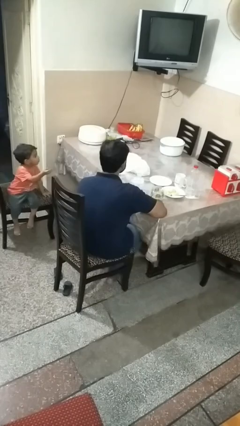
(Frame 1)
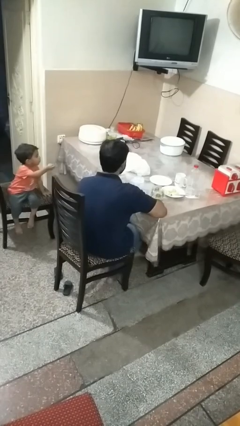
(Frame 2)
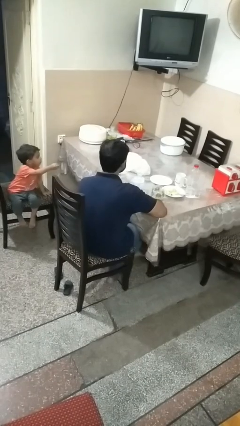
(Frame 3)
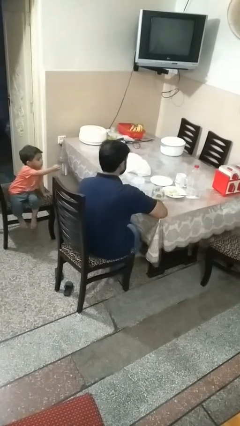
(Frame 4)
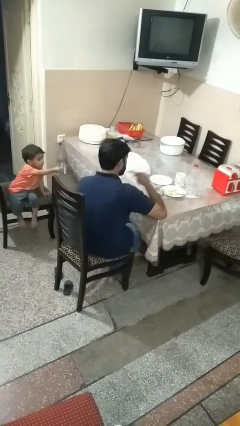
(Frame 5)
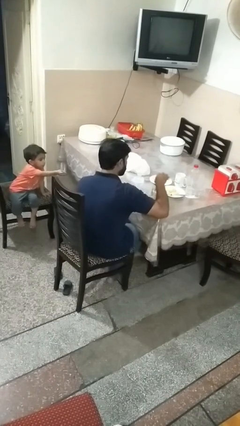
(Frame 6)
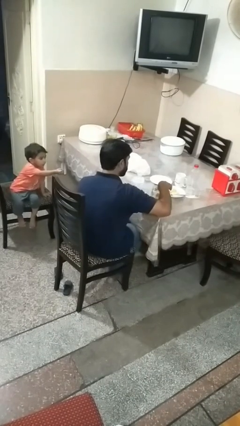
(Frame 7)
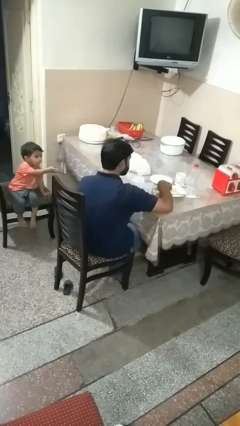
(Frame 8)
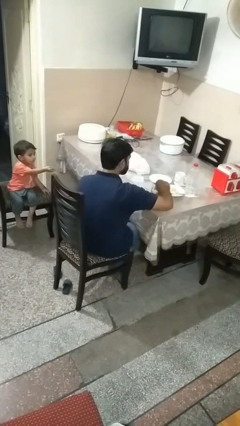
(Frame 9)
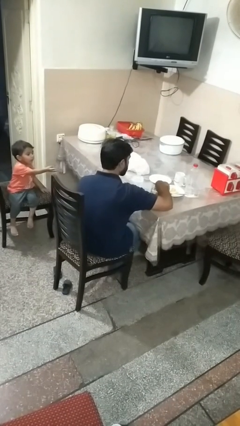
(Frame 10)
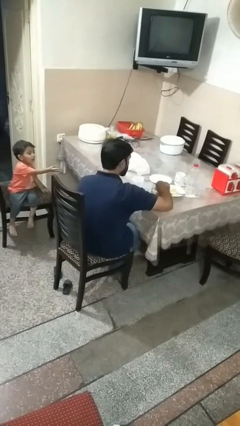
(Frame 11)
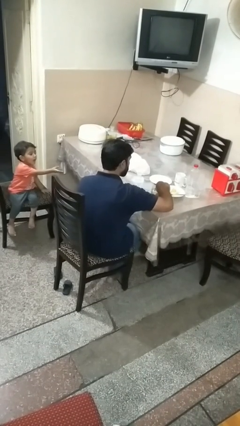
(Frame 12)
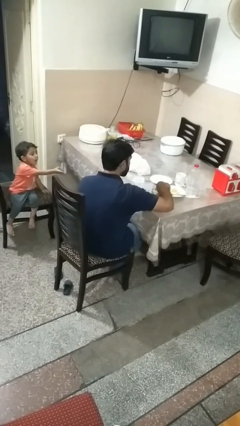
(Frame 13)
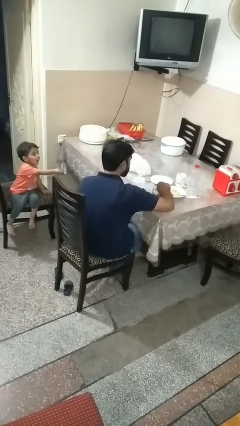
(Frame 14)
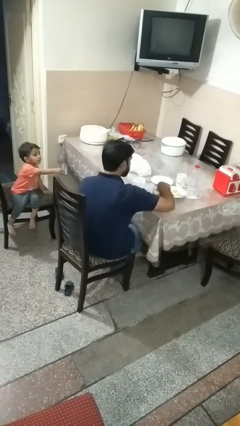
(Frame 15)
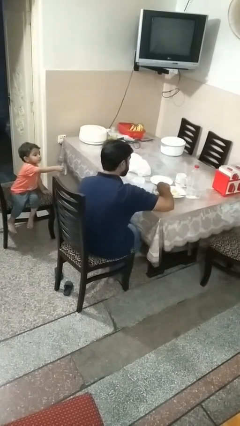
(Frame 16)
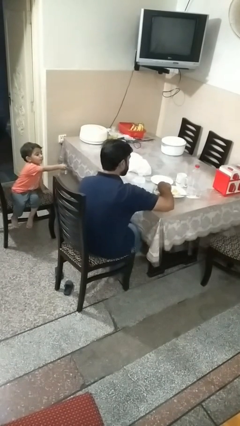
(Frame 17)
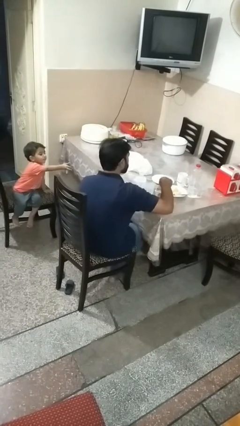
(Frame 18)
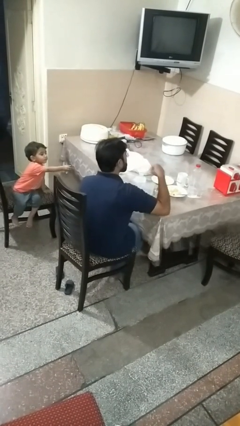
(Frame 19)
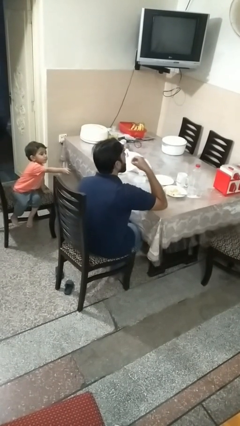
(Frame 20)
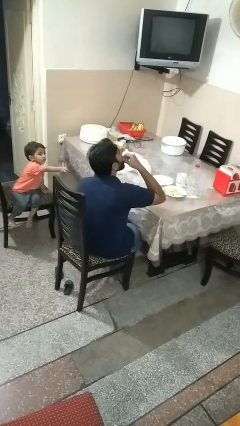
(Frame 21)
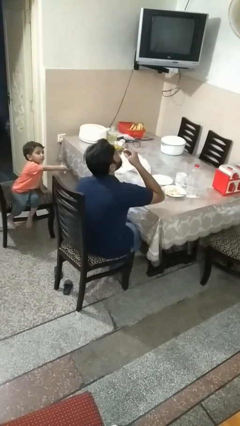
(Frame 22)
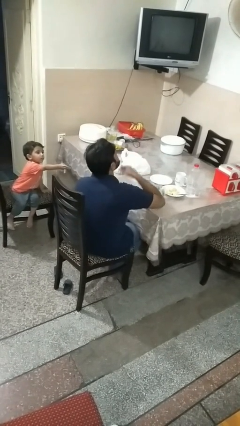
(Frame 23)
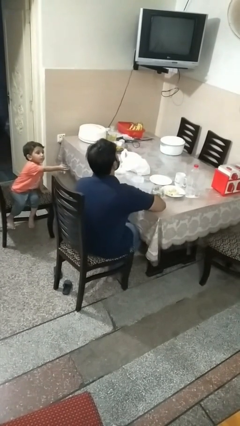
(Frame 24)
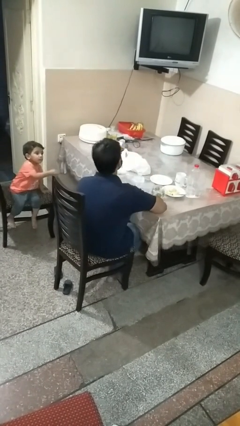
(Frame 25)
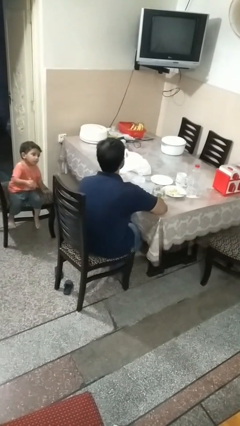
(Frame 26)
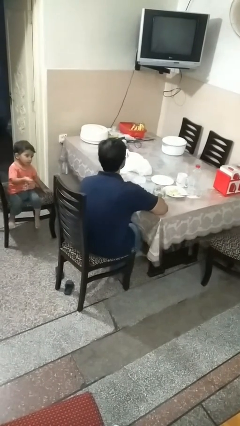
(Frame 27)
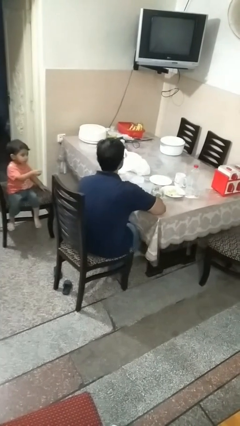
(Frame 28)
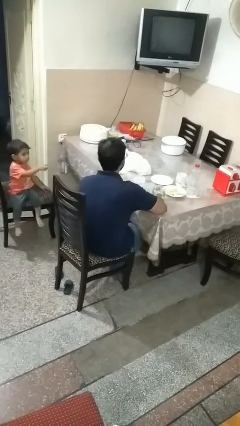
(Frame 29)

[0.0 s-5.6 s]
person eats with hands

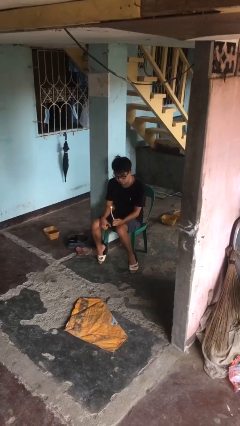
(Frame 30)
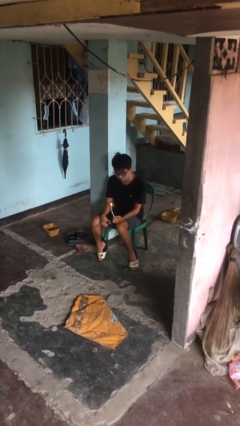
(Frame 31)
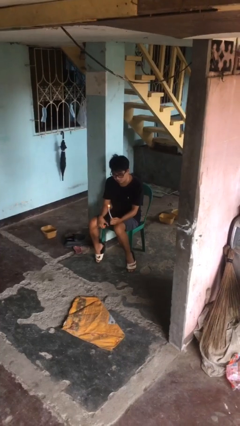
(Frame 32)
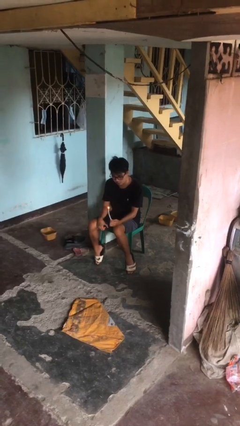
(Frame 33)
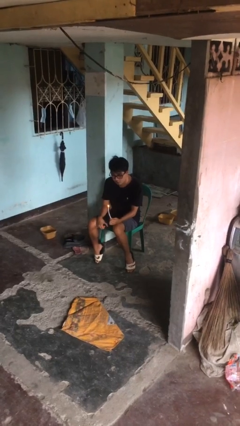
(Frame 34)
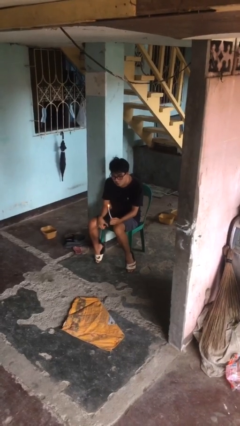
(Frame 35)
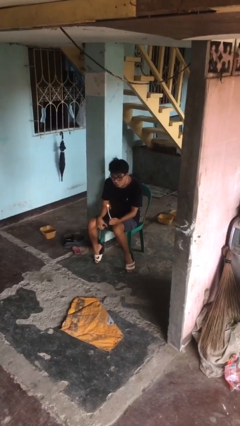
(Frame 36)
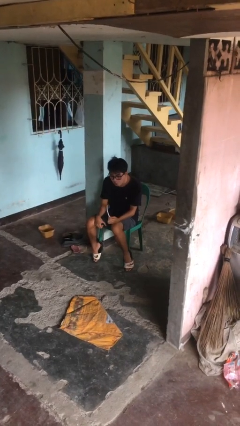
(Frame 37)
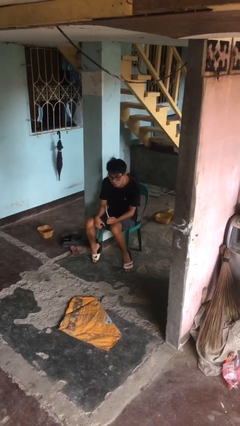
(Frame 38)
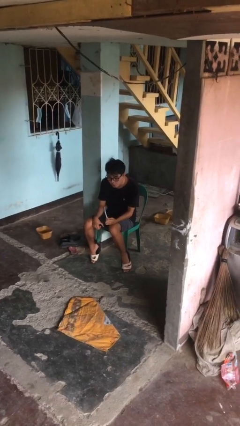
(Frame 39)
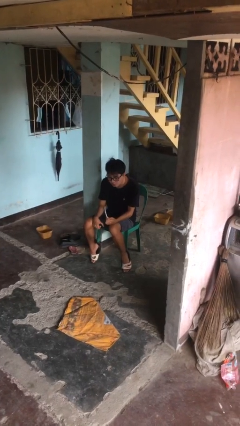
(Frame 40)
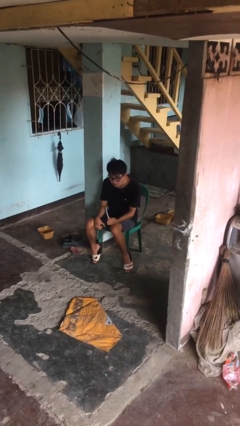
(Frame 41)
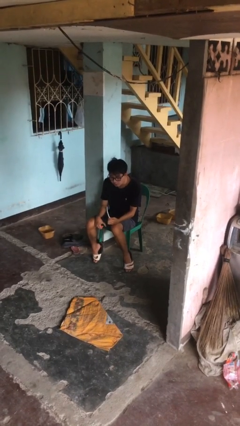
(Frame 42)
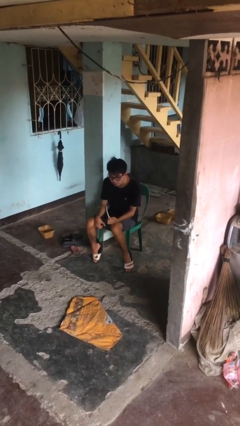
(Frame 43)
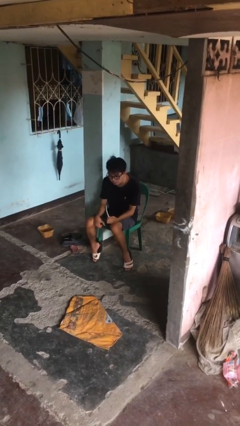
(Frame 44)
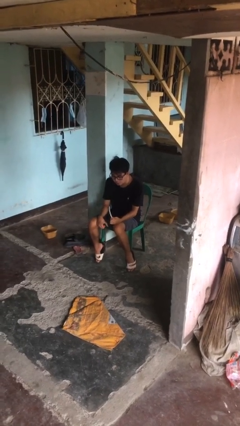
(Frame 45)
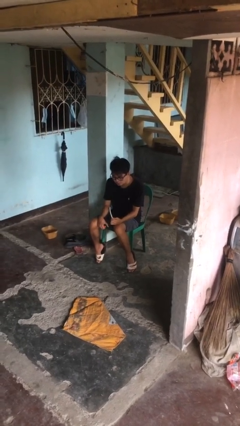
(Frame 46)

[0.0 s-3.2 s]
person extinguishes candle

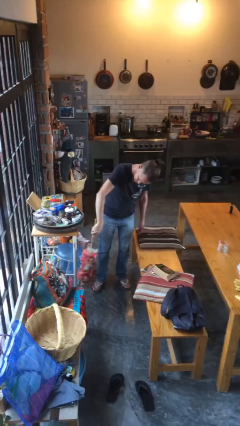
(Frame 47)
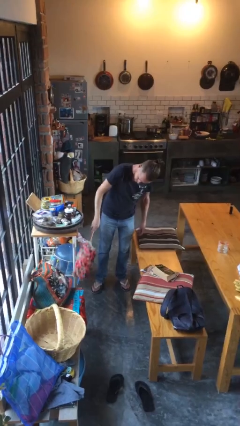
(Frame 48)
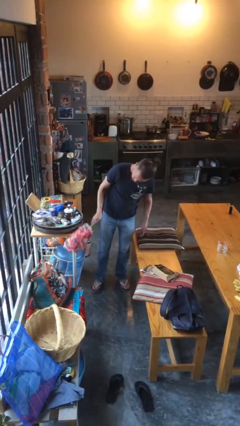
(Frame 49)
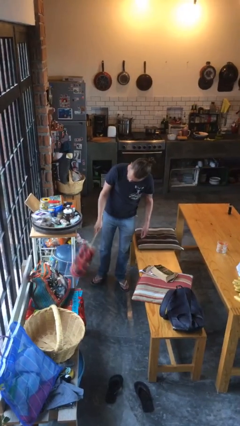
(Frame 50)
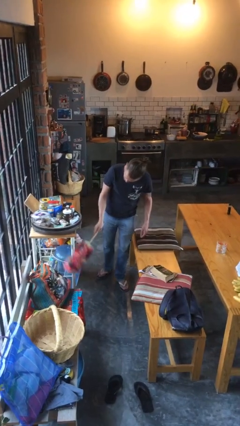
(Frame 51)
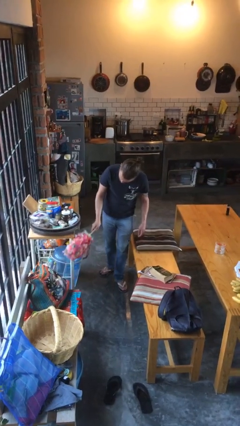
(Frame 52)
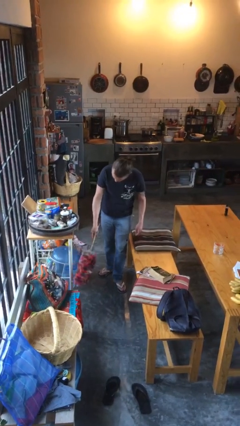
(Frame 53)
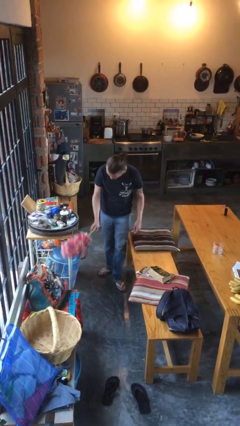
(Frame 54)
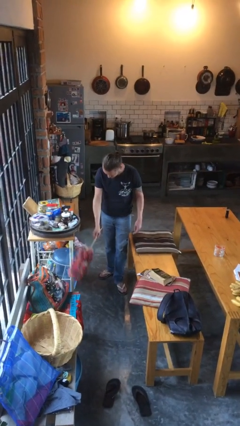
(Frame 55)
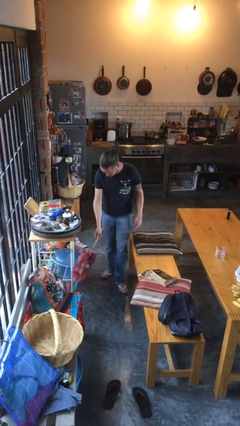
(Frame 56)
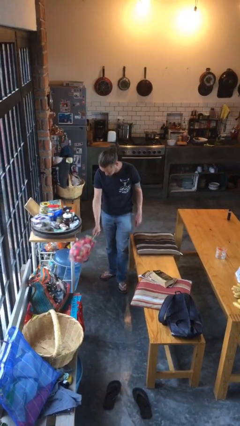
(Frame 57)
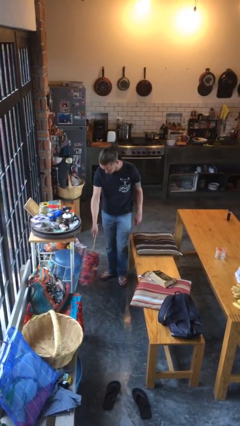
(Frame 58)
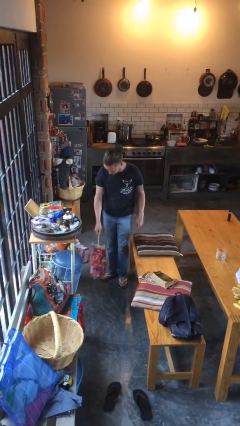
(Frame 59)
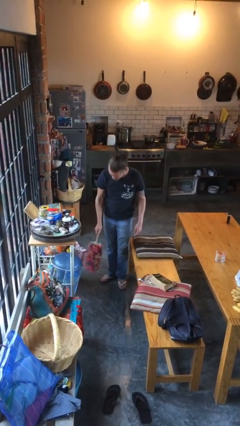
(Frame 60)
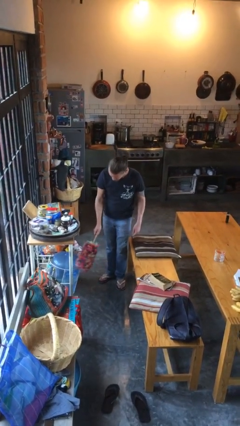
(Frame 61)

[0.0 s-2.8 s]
person dusts furniture

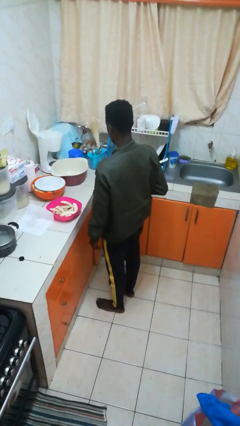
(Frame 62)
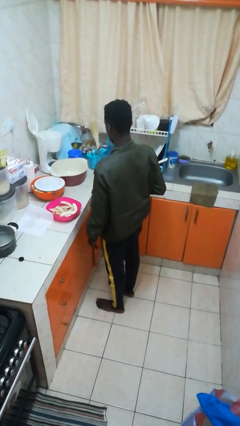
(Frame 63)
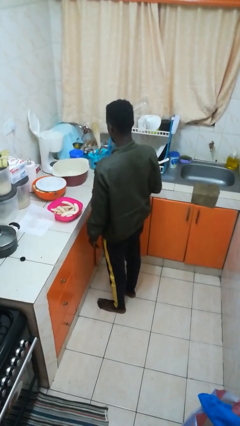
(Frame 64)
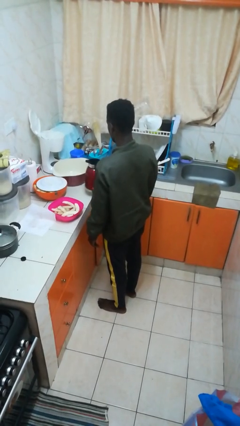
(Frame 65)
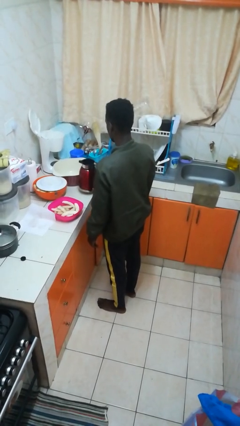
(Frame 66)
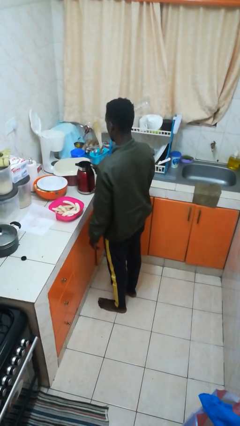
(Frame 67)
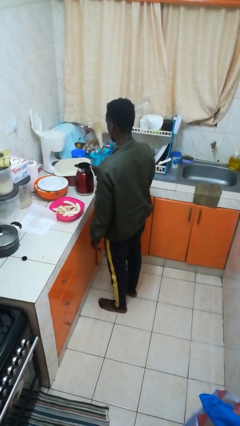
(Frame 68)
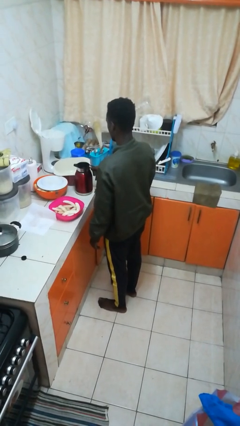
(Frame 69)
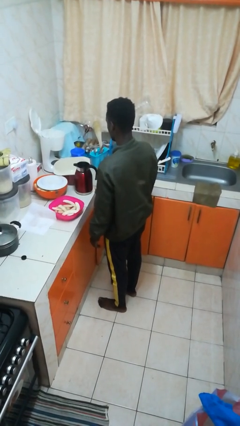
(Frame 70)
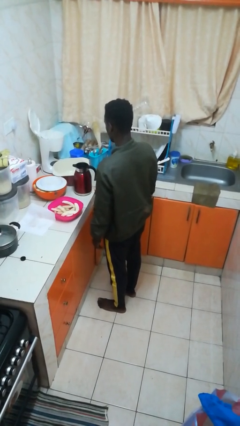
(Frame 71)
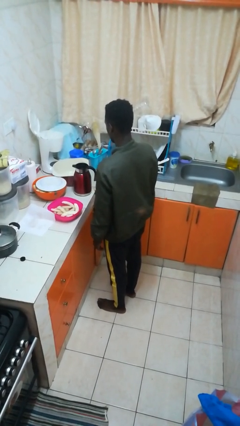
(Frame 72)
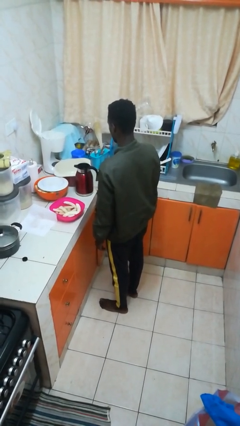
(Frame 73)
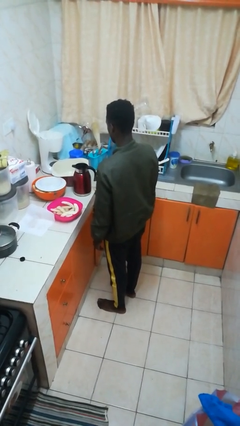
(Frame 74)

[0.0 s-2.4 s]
person puts down object on countertop

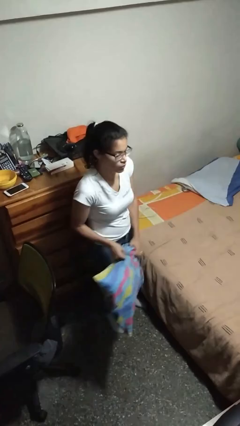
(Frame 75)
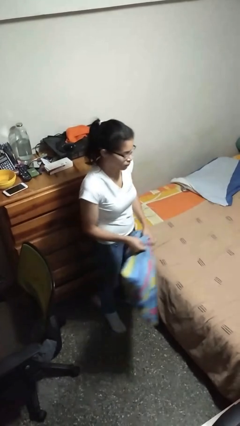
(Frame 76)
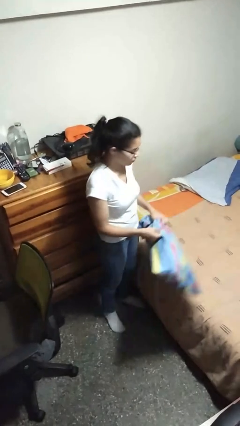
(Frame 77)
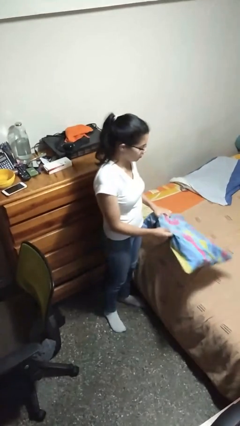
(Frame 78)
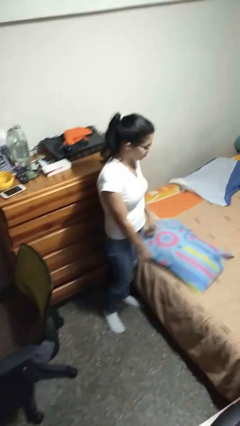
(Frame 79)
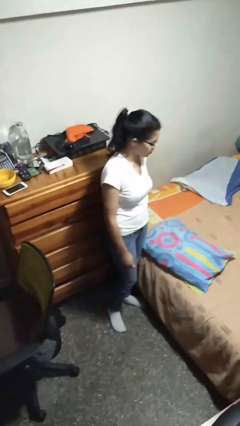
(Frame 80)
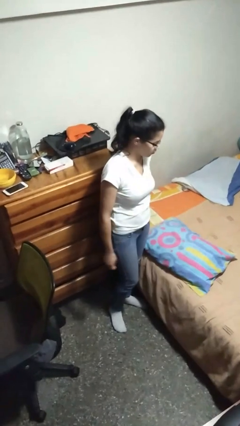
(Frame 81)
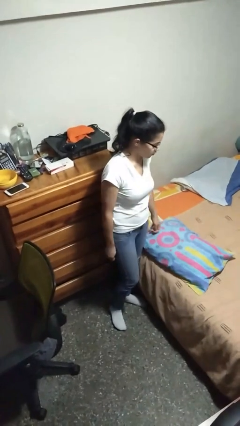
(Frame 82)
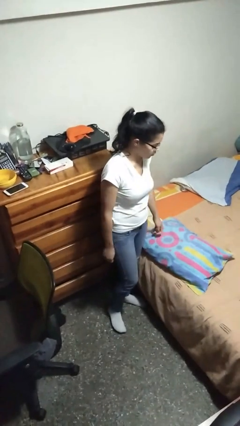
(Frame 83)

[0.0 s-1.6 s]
person puts down object on bed

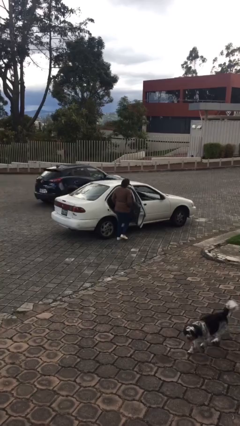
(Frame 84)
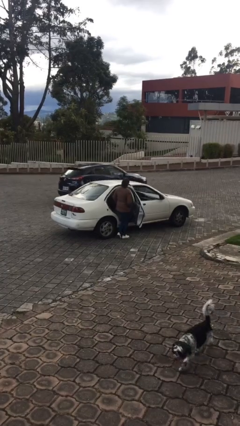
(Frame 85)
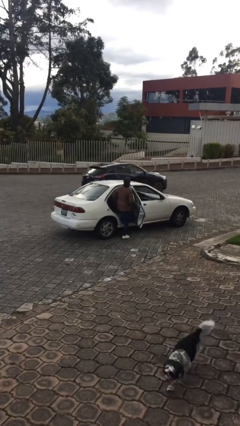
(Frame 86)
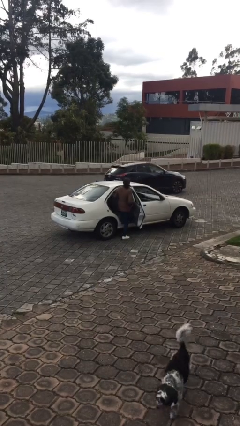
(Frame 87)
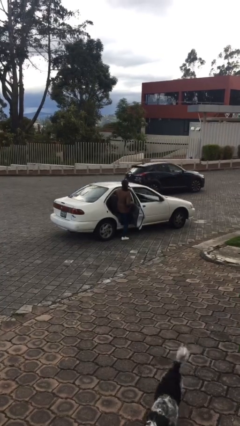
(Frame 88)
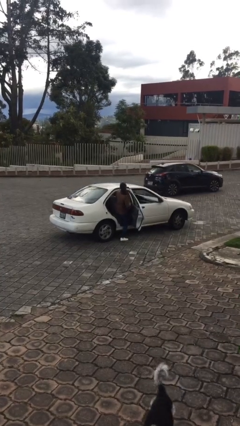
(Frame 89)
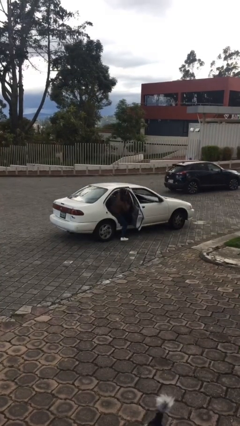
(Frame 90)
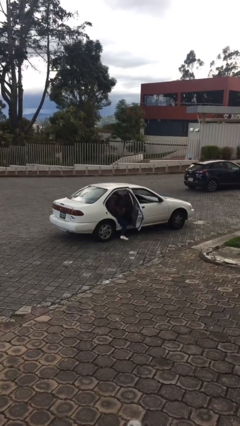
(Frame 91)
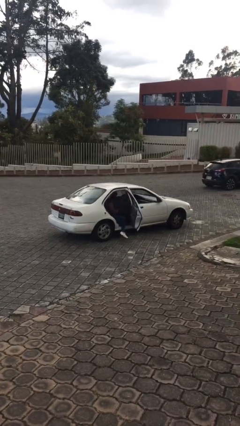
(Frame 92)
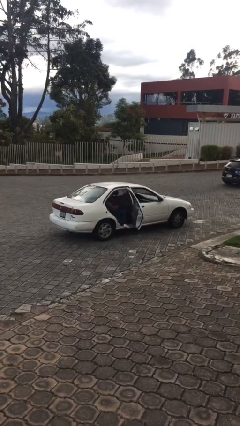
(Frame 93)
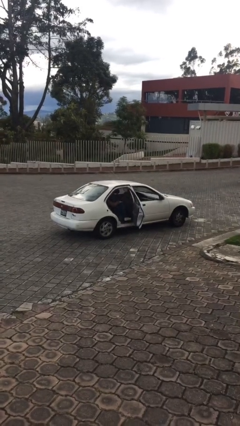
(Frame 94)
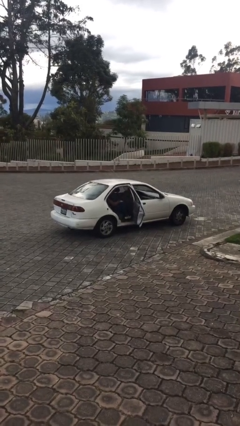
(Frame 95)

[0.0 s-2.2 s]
person enters car
